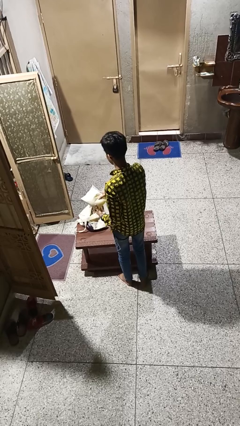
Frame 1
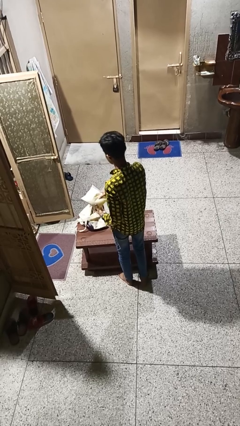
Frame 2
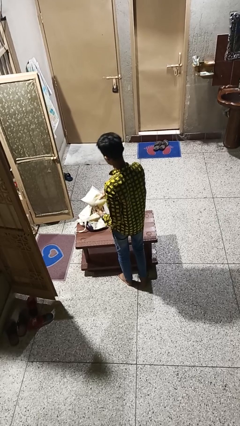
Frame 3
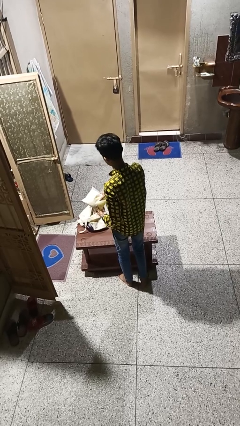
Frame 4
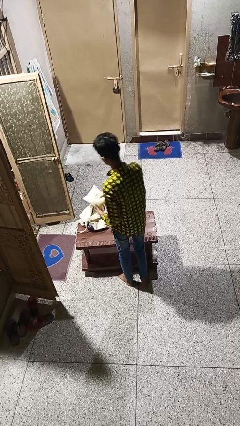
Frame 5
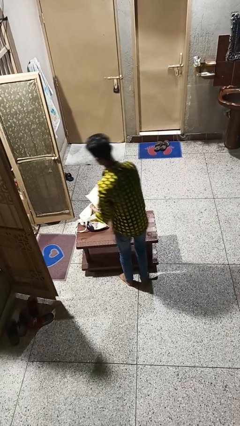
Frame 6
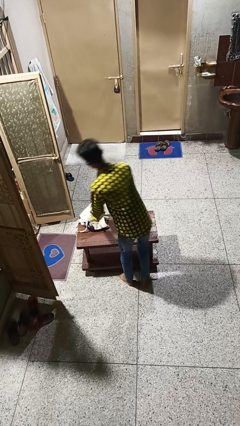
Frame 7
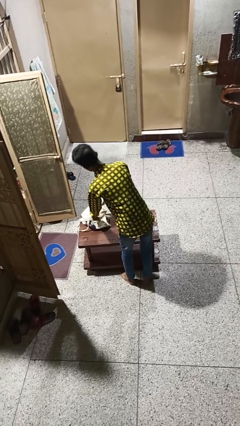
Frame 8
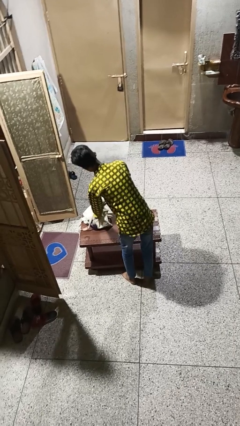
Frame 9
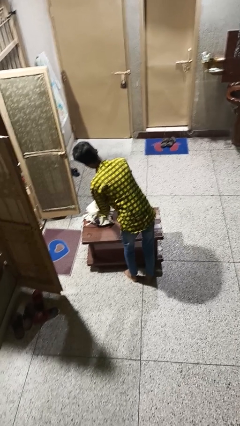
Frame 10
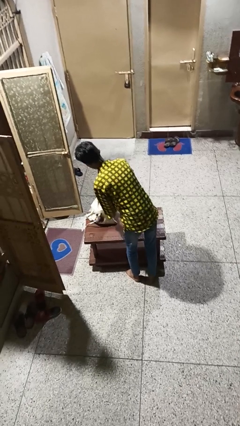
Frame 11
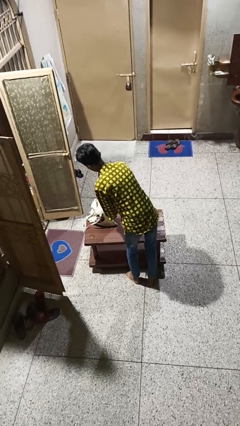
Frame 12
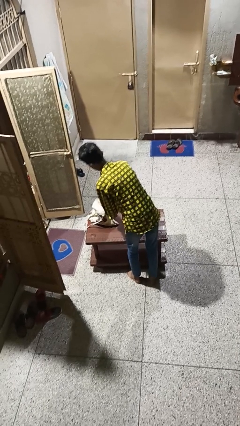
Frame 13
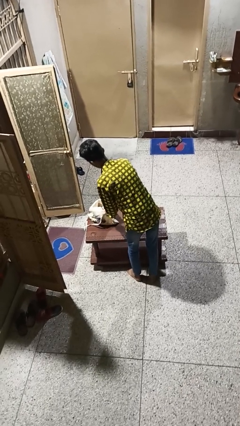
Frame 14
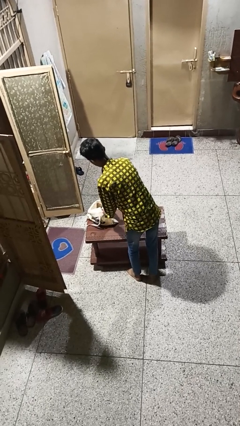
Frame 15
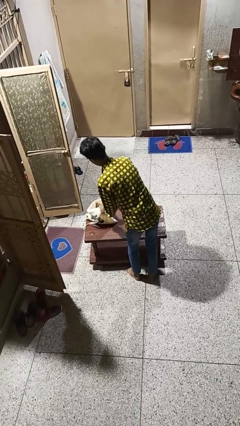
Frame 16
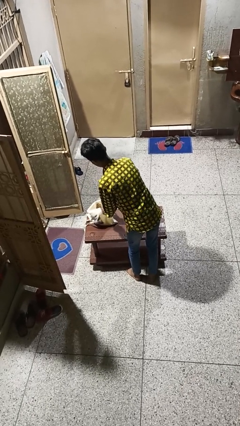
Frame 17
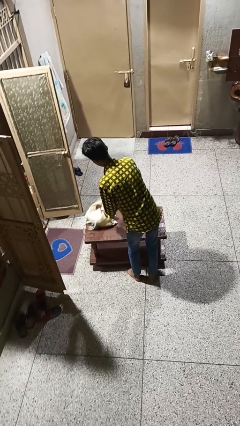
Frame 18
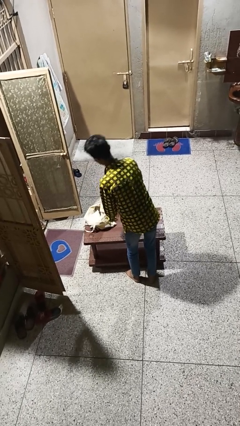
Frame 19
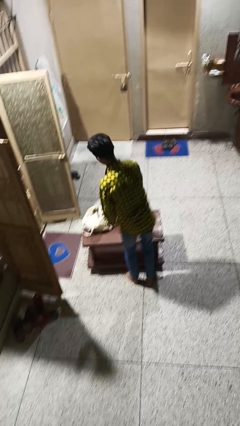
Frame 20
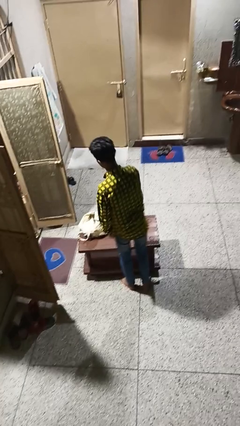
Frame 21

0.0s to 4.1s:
person puts object into bag

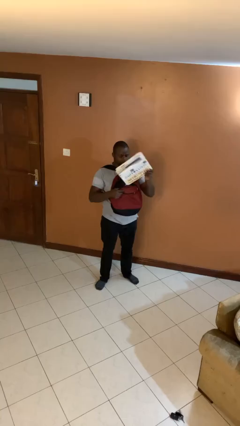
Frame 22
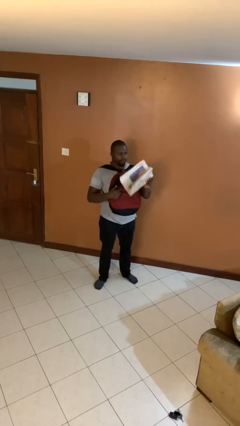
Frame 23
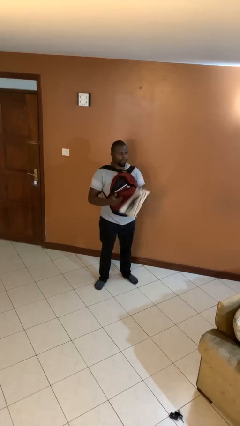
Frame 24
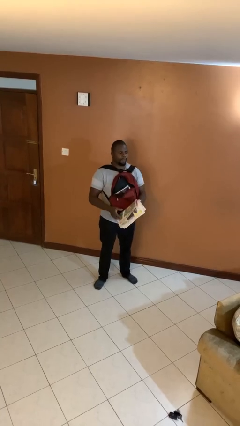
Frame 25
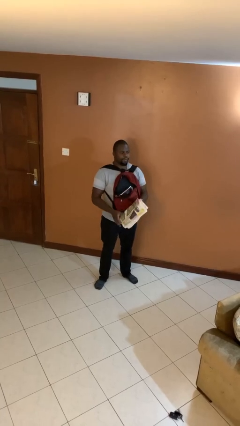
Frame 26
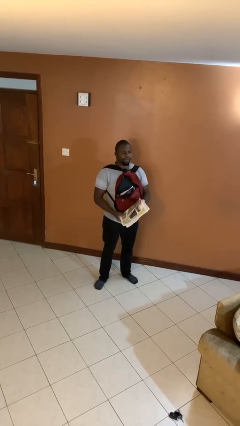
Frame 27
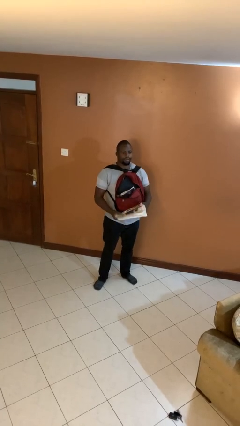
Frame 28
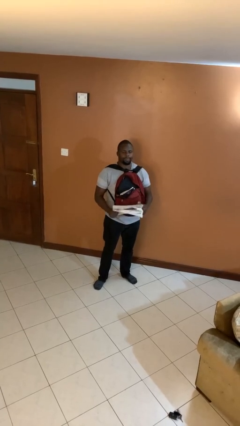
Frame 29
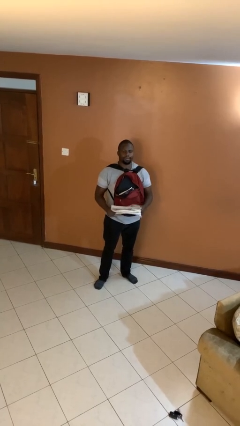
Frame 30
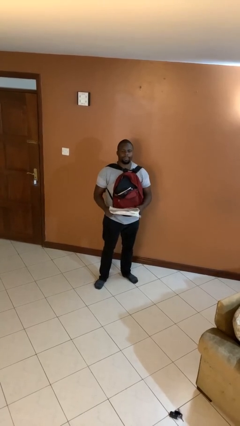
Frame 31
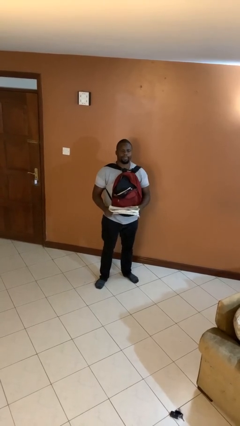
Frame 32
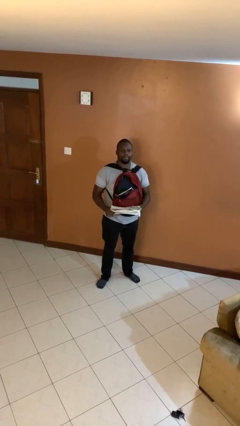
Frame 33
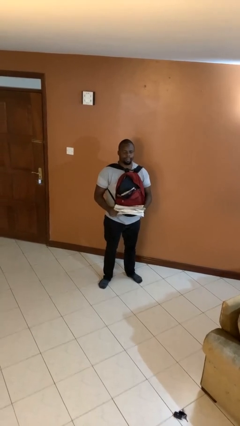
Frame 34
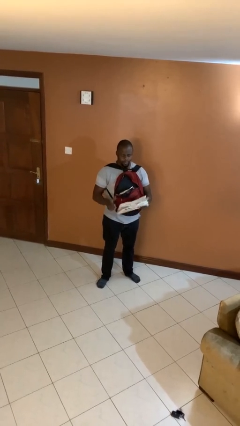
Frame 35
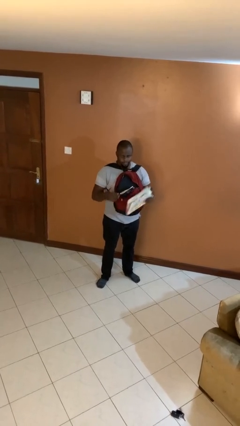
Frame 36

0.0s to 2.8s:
person takes object from backpack

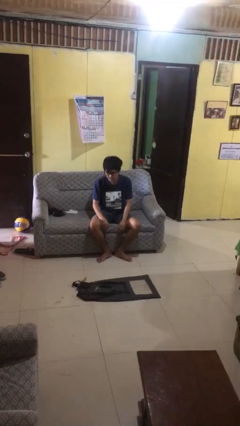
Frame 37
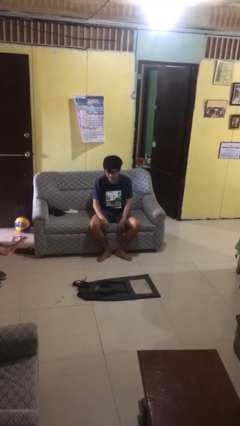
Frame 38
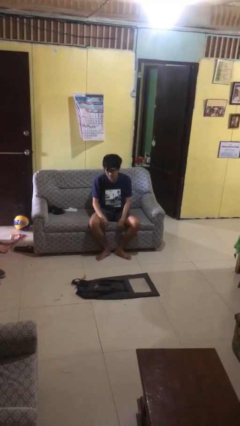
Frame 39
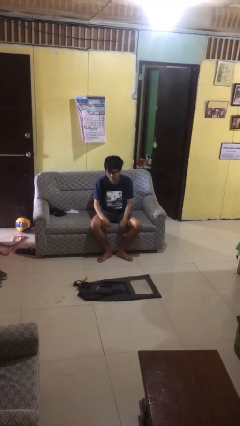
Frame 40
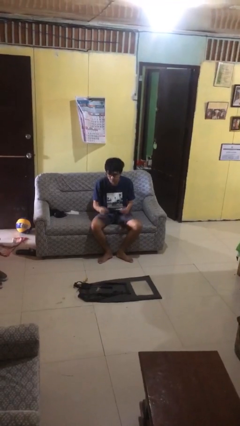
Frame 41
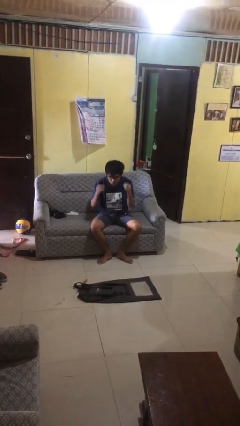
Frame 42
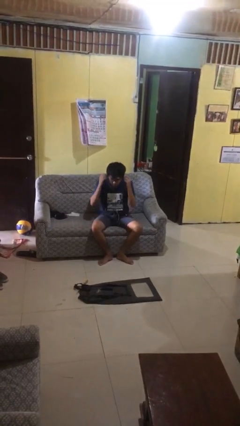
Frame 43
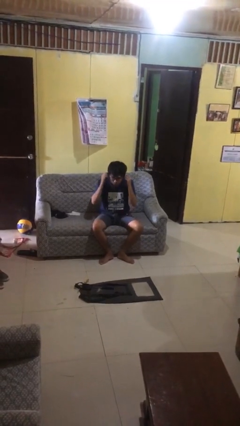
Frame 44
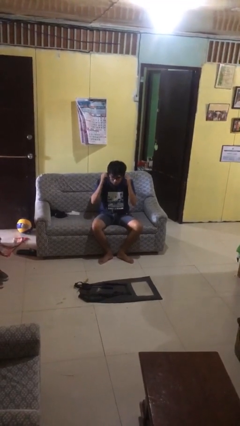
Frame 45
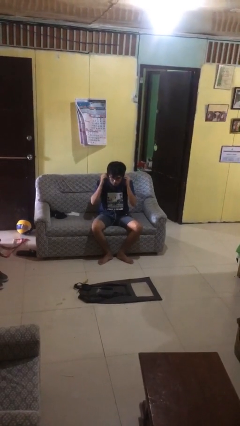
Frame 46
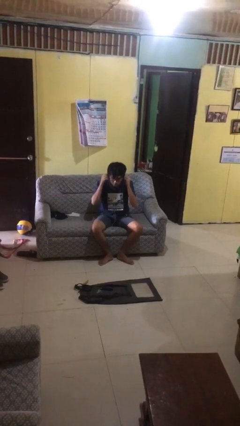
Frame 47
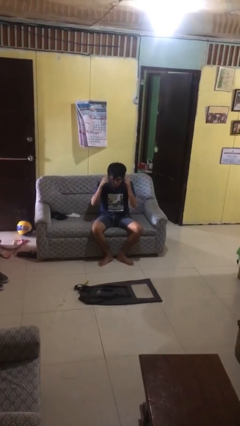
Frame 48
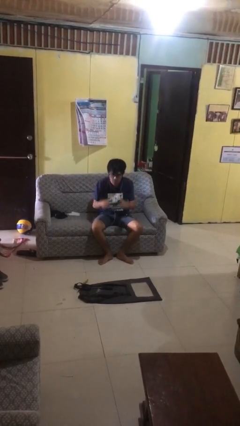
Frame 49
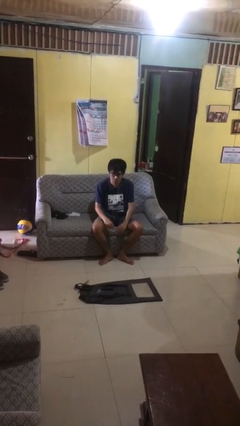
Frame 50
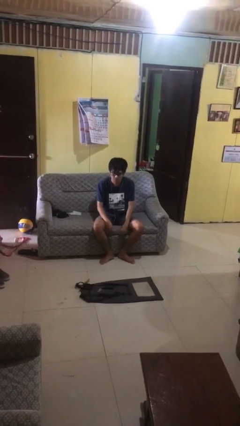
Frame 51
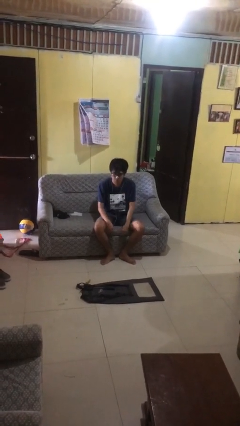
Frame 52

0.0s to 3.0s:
person puts on headphones

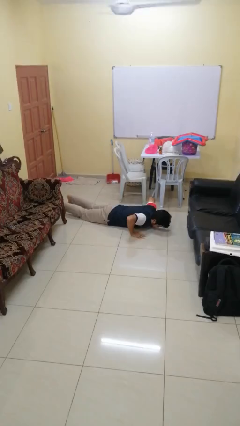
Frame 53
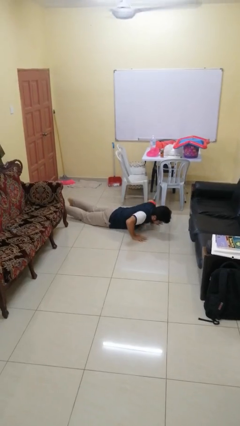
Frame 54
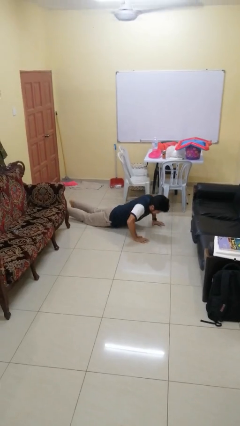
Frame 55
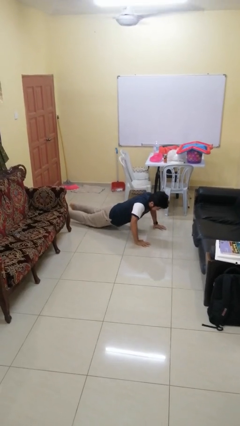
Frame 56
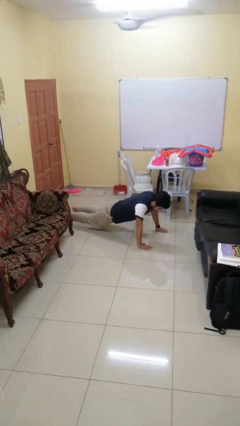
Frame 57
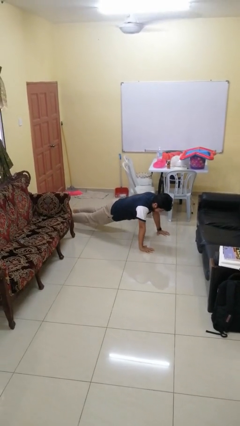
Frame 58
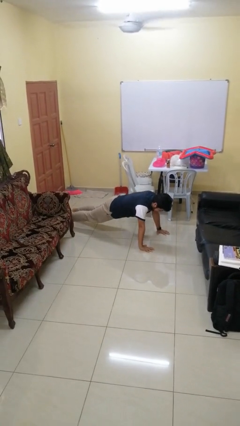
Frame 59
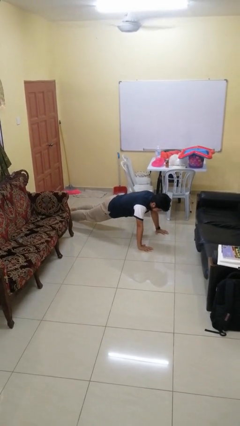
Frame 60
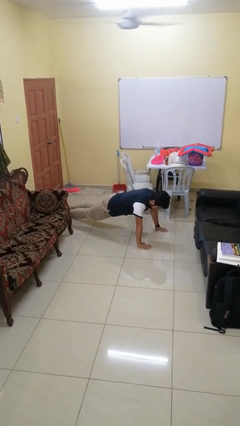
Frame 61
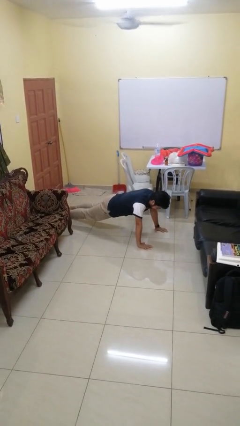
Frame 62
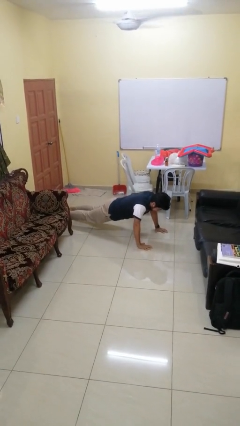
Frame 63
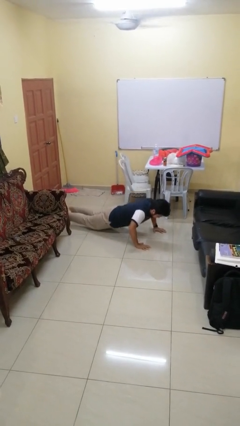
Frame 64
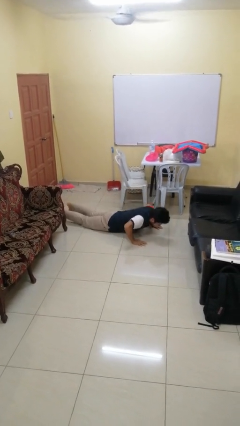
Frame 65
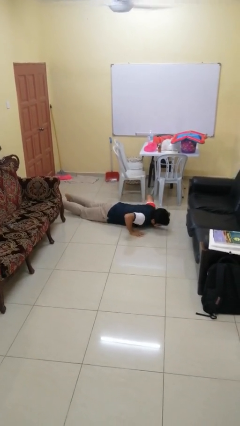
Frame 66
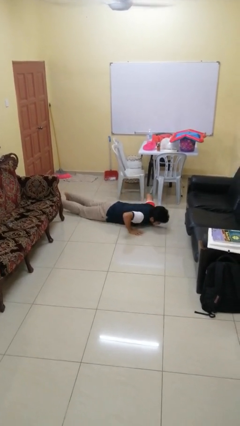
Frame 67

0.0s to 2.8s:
person exercises with pushup

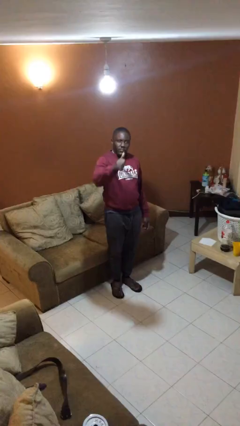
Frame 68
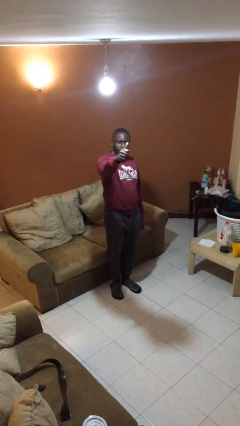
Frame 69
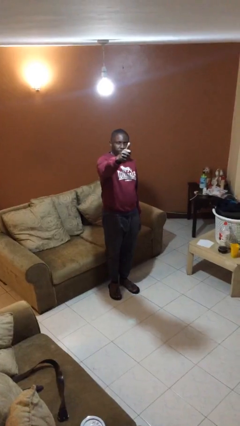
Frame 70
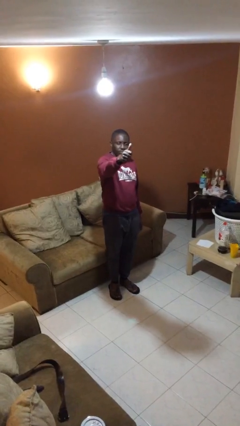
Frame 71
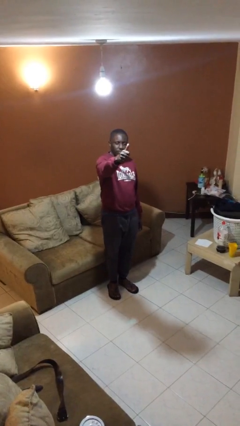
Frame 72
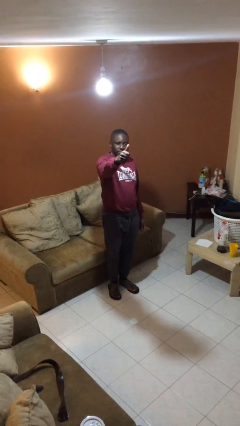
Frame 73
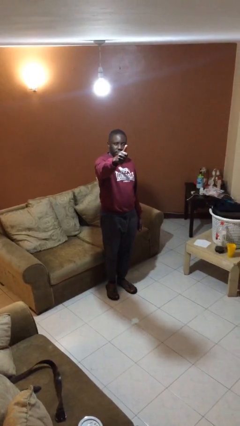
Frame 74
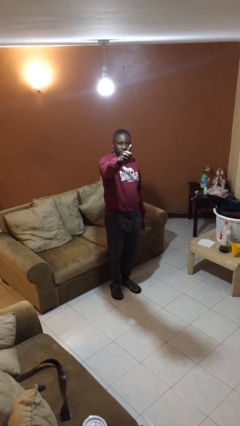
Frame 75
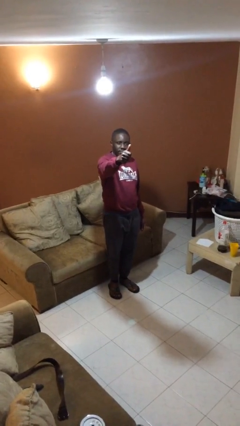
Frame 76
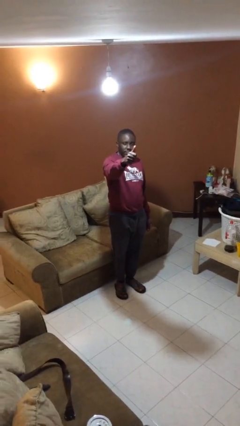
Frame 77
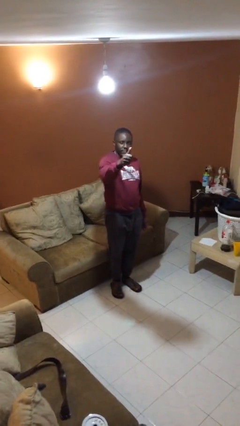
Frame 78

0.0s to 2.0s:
person gestures thumbs up

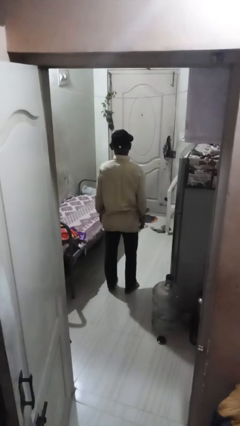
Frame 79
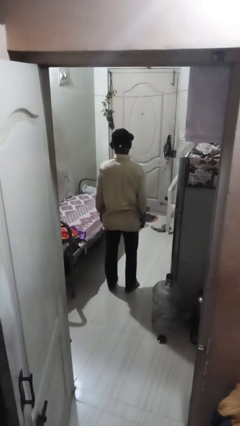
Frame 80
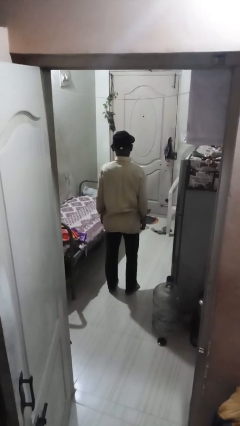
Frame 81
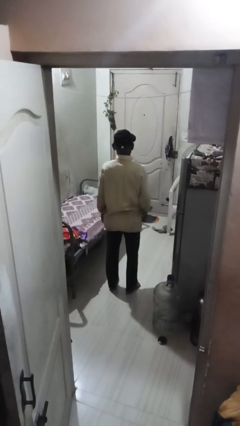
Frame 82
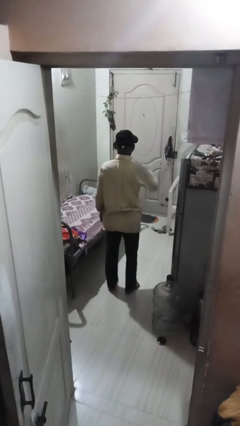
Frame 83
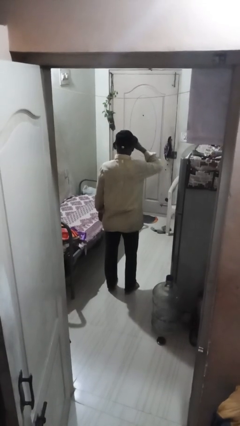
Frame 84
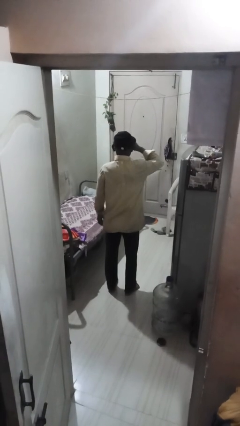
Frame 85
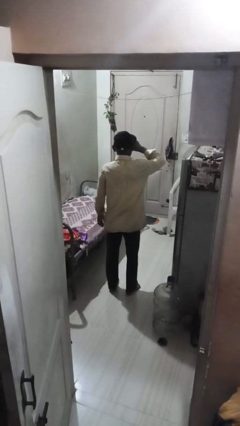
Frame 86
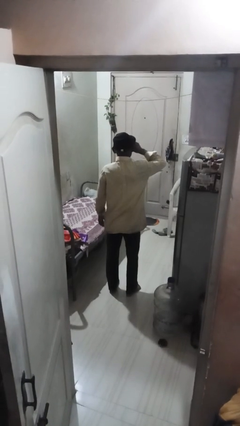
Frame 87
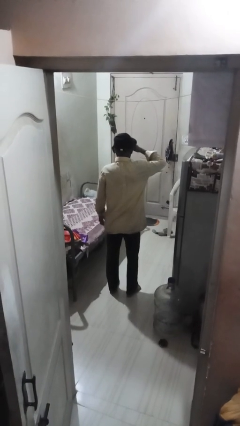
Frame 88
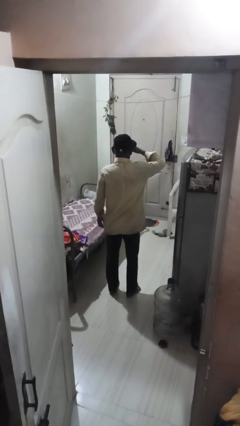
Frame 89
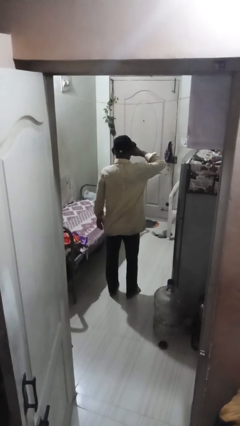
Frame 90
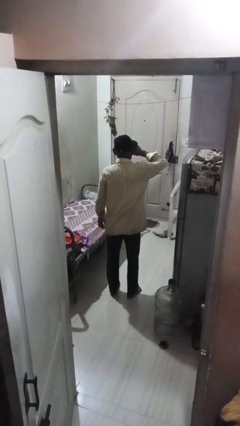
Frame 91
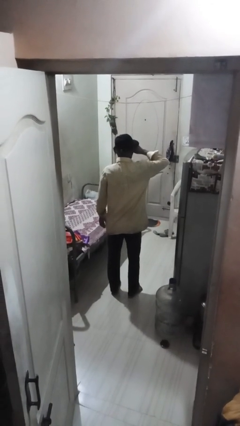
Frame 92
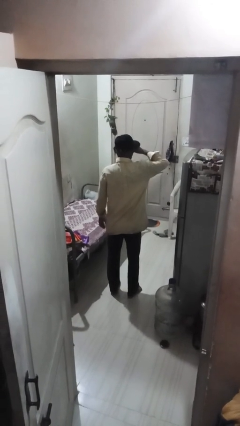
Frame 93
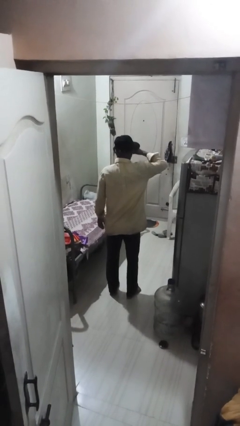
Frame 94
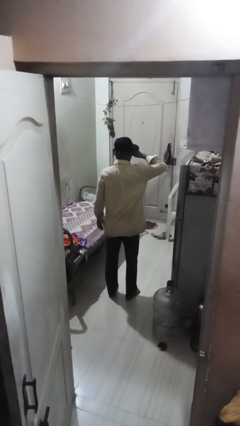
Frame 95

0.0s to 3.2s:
person rubs eyes
